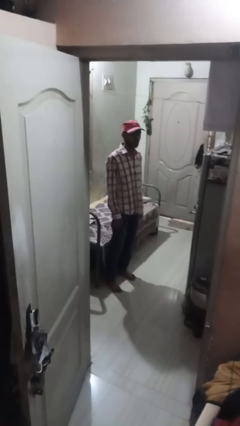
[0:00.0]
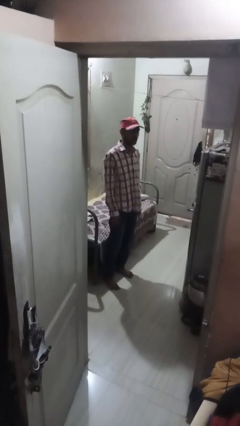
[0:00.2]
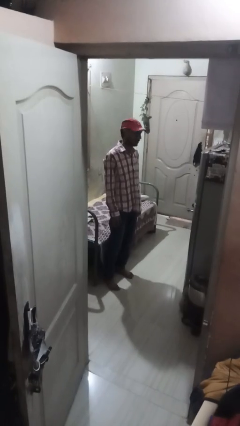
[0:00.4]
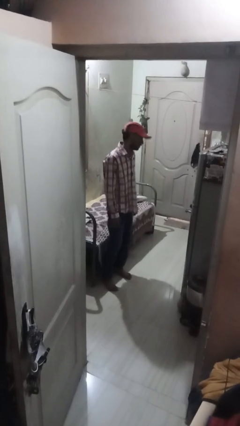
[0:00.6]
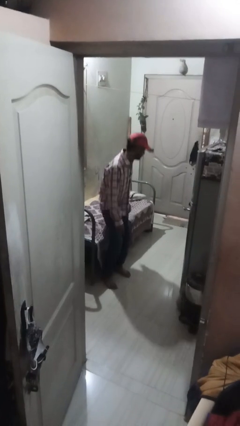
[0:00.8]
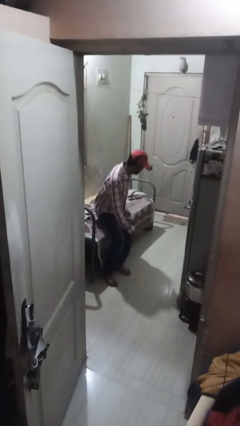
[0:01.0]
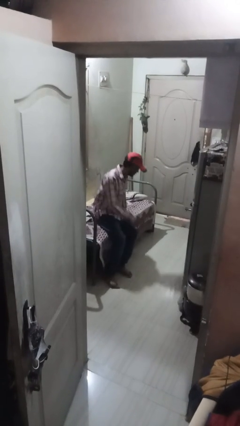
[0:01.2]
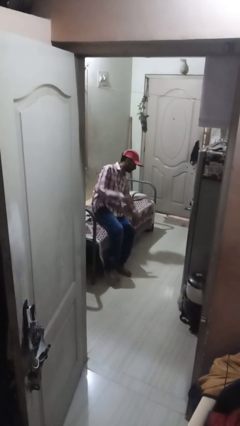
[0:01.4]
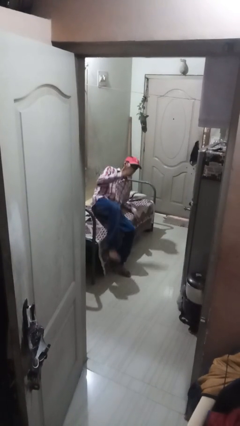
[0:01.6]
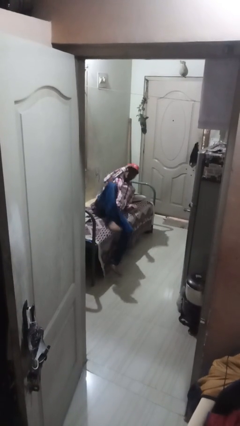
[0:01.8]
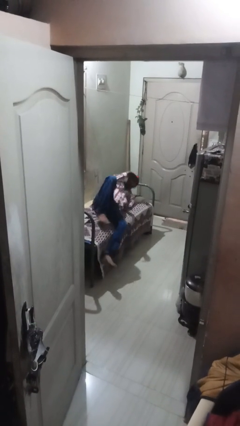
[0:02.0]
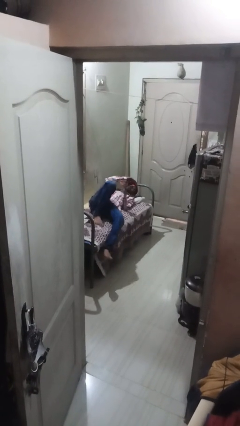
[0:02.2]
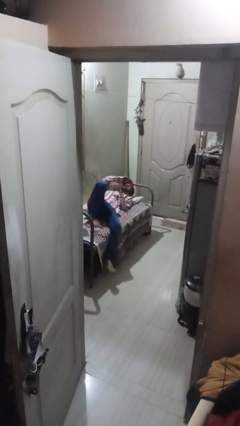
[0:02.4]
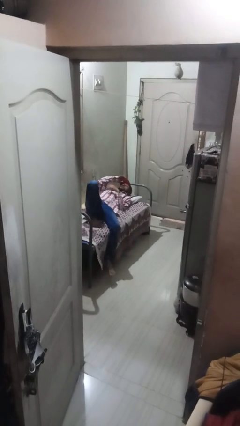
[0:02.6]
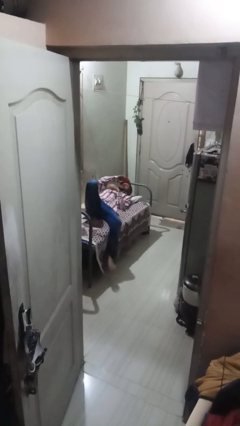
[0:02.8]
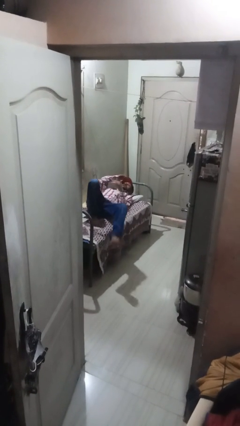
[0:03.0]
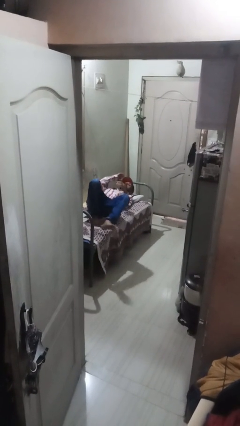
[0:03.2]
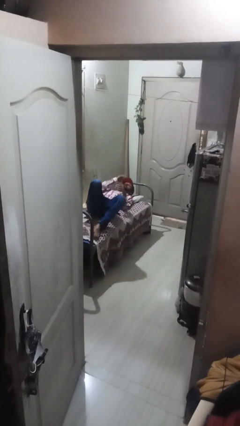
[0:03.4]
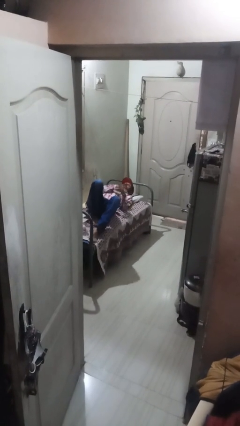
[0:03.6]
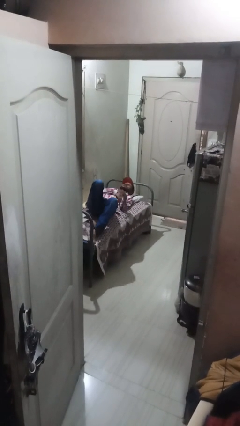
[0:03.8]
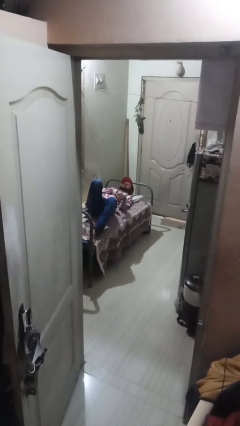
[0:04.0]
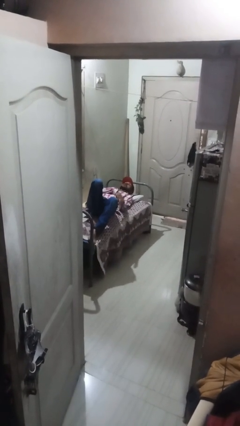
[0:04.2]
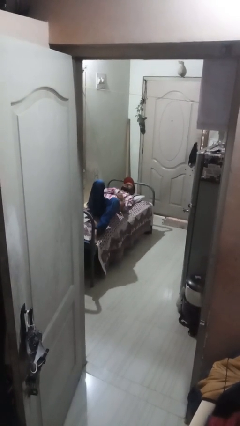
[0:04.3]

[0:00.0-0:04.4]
person lies down on bed

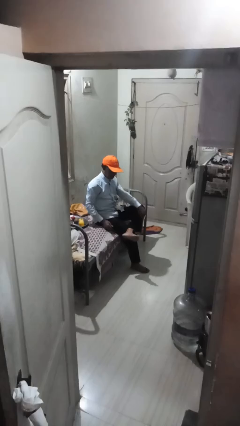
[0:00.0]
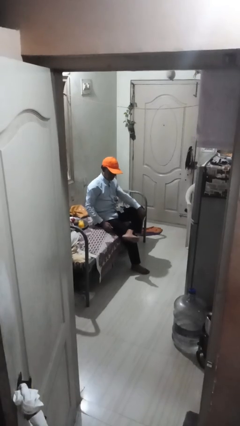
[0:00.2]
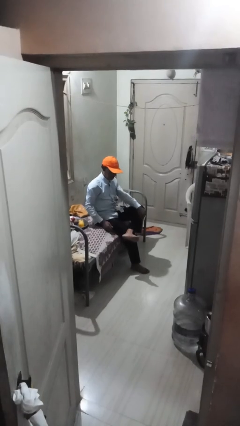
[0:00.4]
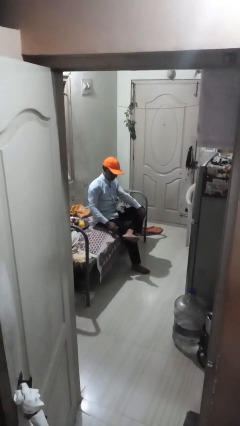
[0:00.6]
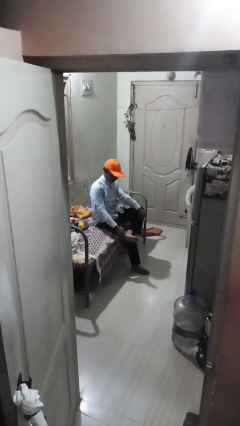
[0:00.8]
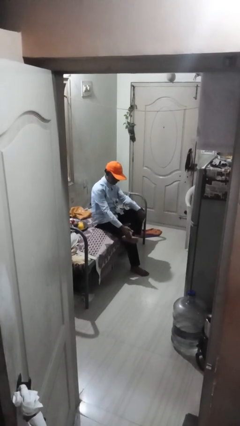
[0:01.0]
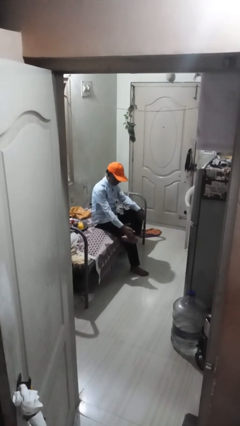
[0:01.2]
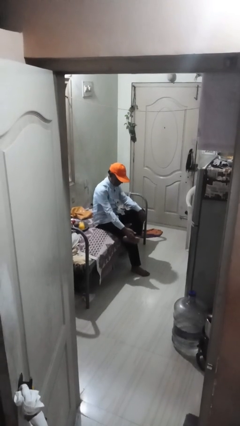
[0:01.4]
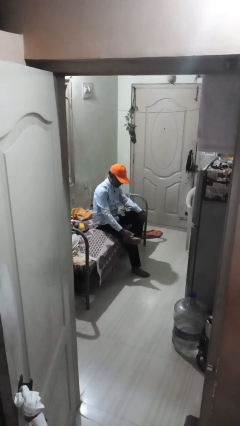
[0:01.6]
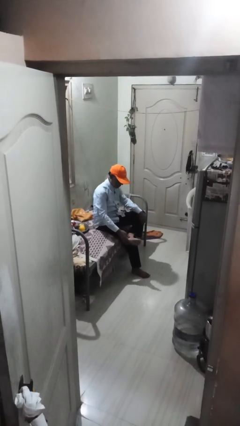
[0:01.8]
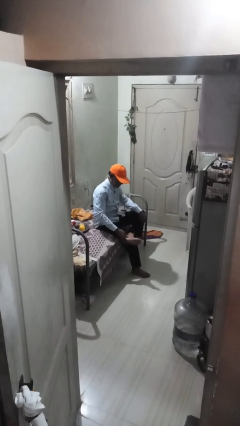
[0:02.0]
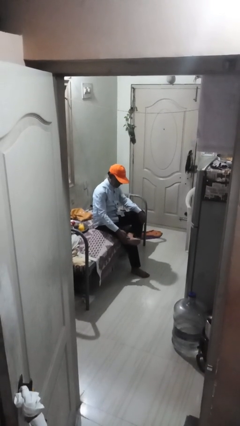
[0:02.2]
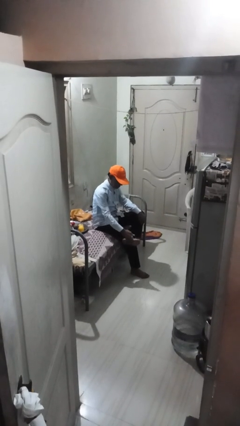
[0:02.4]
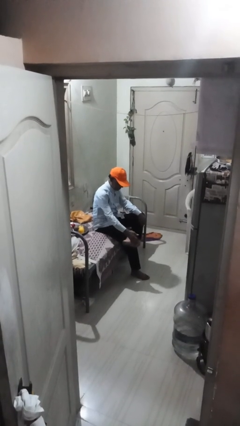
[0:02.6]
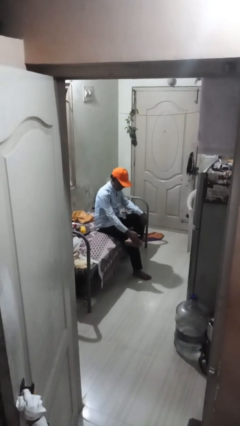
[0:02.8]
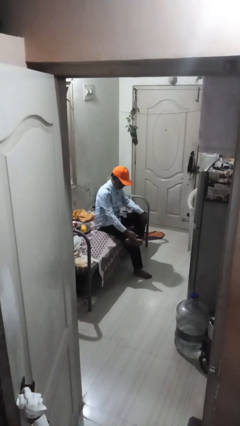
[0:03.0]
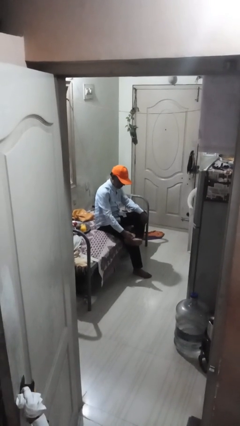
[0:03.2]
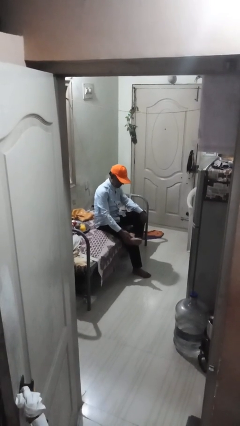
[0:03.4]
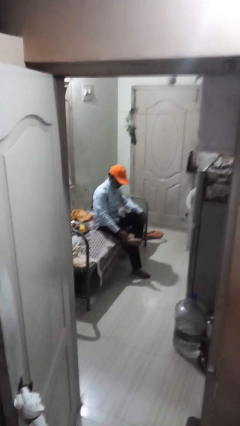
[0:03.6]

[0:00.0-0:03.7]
person rubs foot

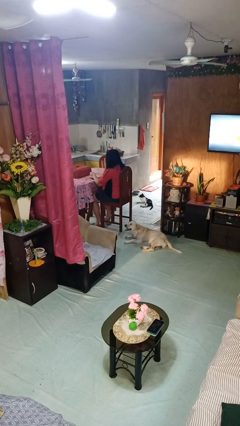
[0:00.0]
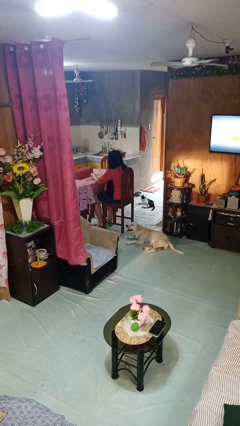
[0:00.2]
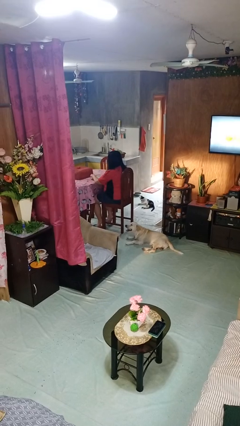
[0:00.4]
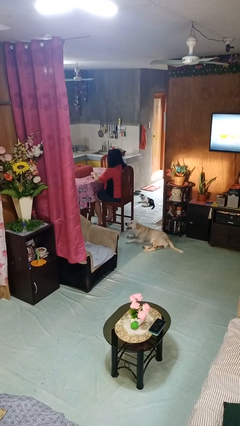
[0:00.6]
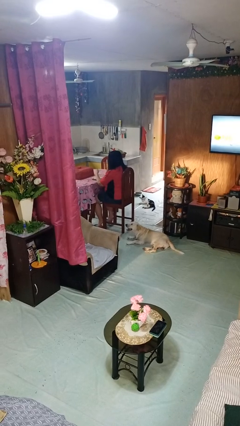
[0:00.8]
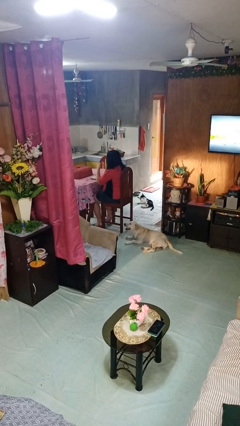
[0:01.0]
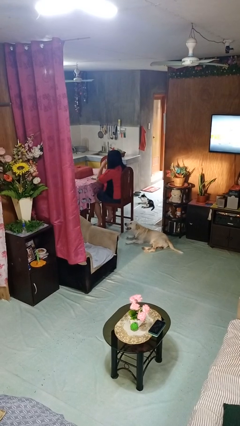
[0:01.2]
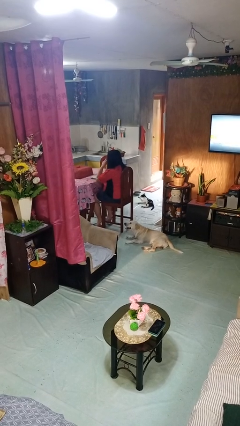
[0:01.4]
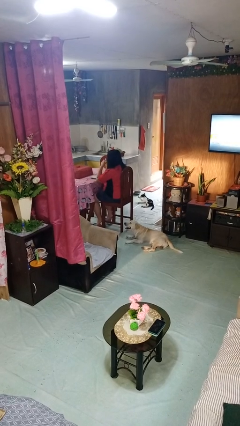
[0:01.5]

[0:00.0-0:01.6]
person eats with hands

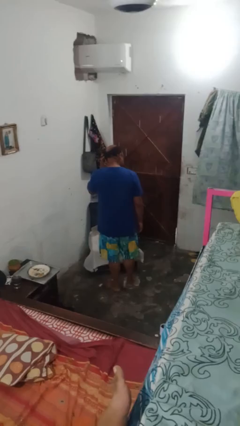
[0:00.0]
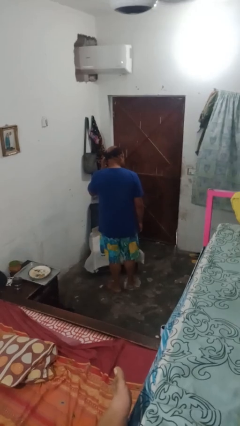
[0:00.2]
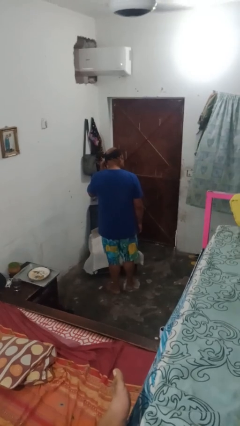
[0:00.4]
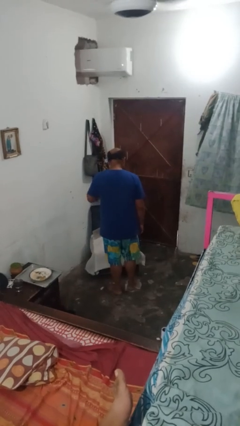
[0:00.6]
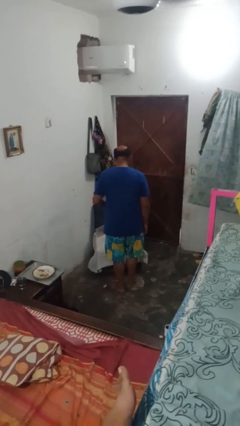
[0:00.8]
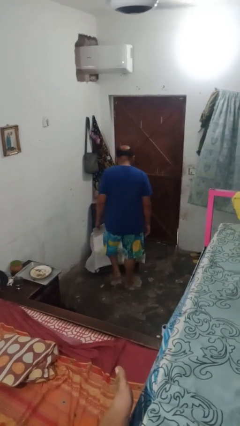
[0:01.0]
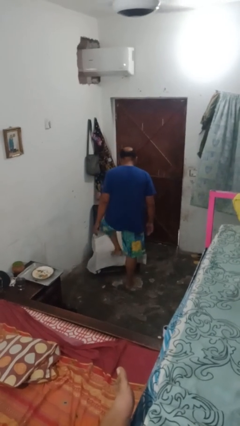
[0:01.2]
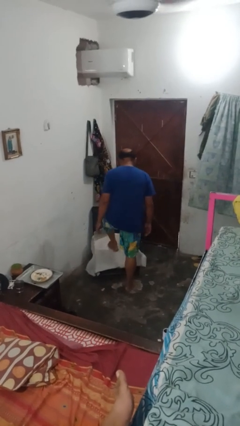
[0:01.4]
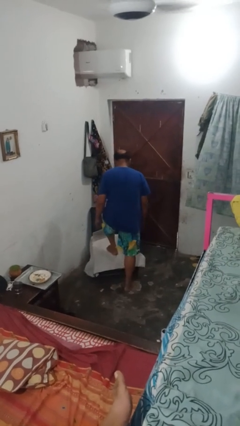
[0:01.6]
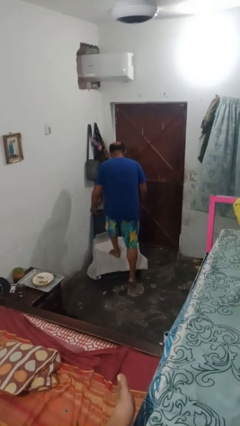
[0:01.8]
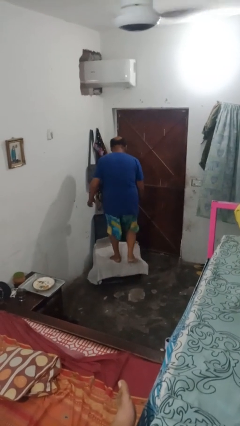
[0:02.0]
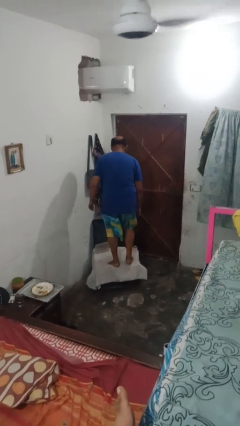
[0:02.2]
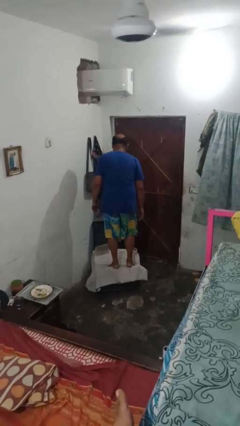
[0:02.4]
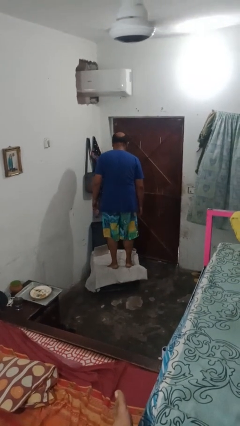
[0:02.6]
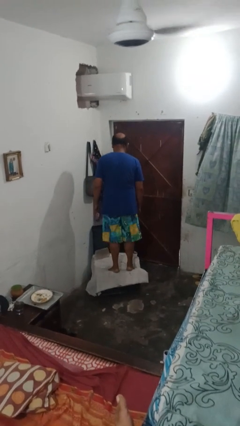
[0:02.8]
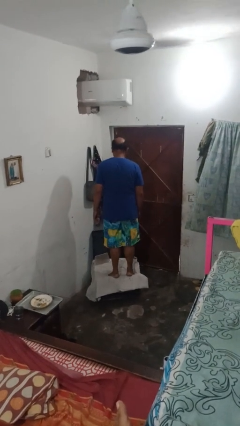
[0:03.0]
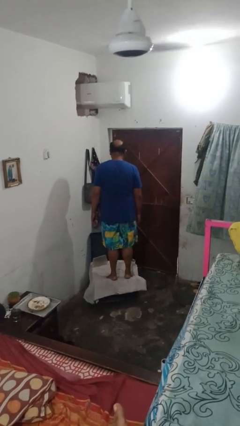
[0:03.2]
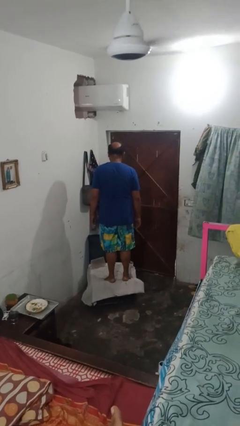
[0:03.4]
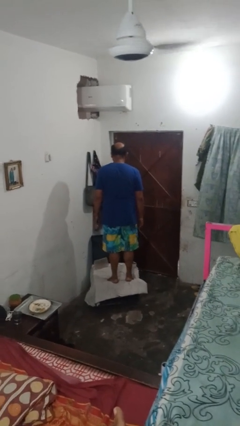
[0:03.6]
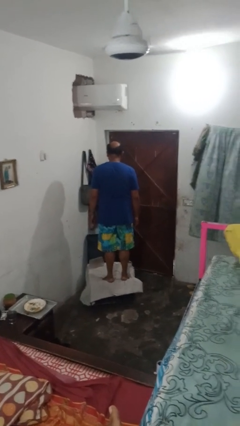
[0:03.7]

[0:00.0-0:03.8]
person climbs on couch

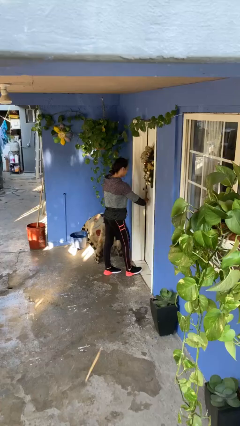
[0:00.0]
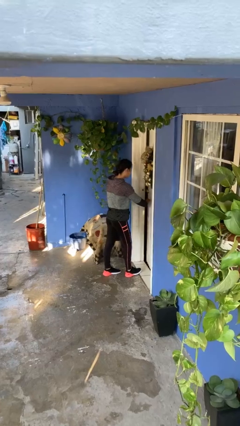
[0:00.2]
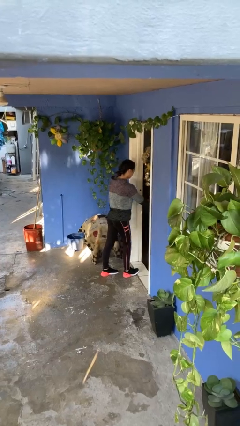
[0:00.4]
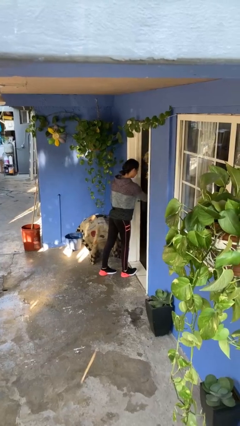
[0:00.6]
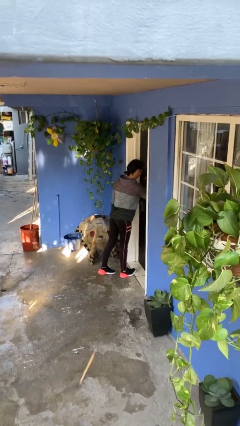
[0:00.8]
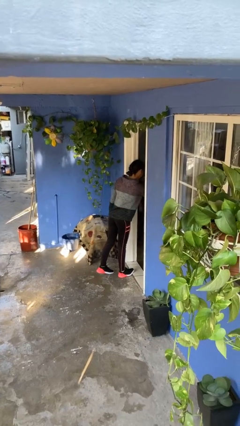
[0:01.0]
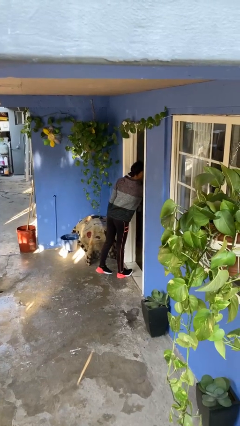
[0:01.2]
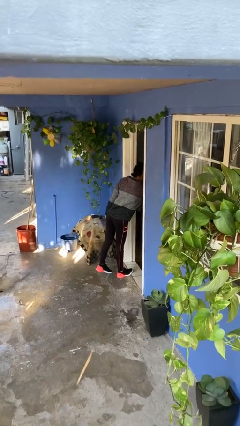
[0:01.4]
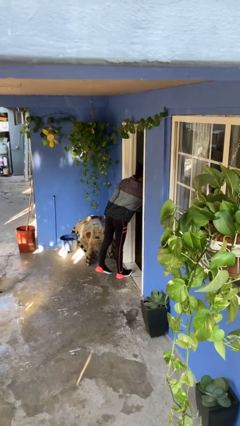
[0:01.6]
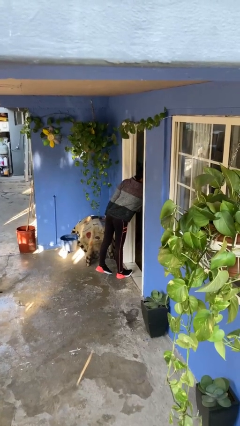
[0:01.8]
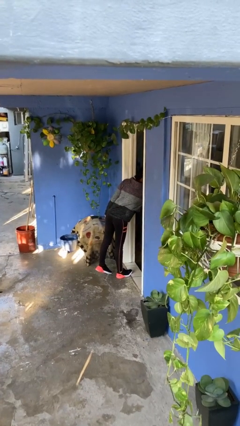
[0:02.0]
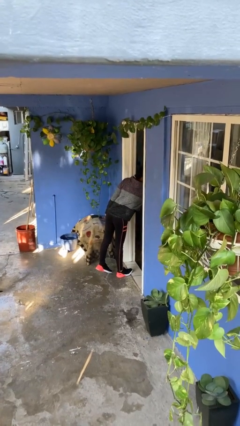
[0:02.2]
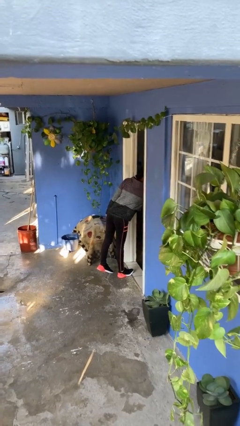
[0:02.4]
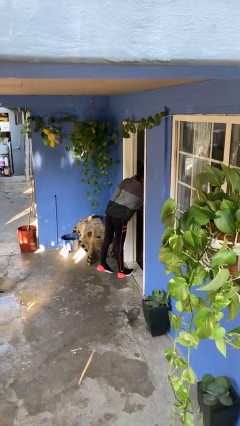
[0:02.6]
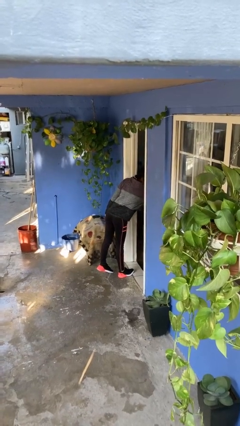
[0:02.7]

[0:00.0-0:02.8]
person opens facility door

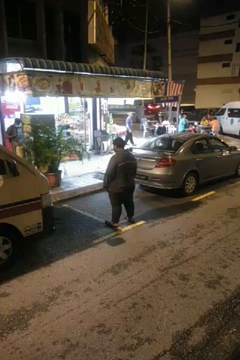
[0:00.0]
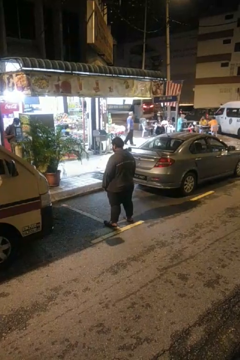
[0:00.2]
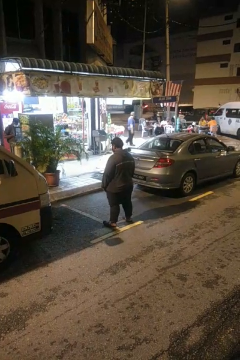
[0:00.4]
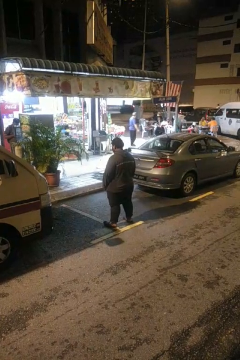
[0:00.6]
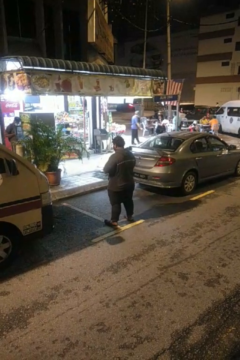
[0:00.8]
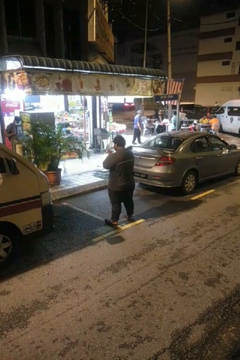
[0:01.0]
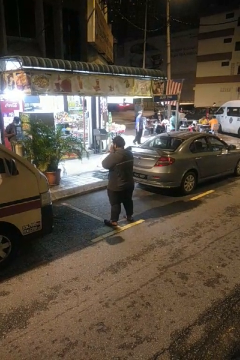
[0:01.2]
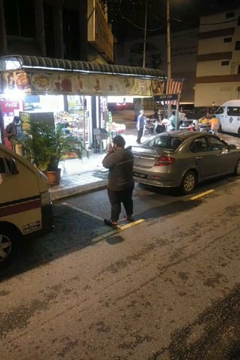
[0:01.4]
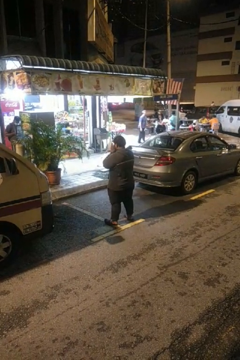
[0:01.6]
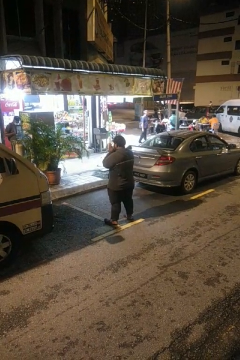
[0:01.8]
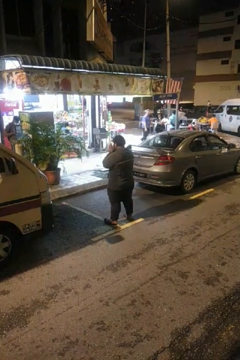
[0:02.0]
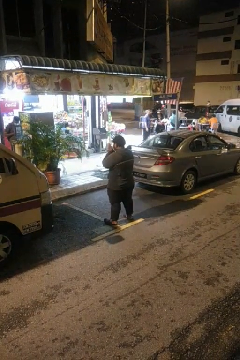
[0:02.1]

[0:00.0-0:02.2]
person blows into hands
